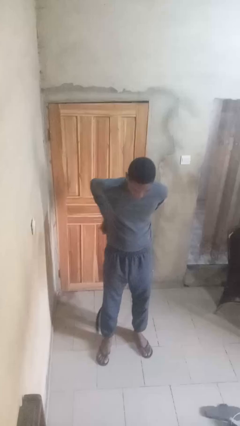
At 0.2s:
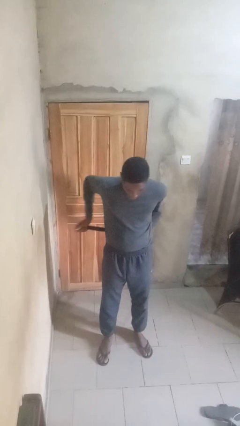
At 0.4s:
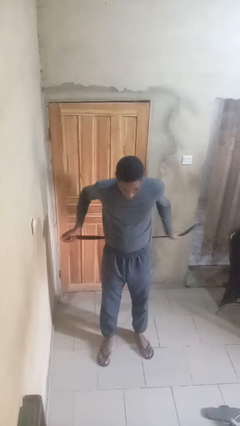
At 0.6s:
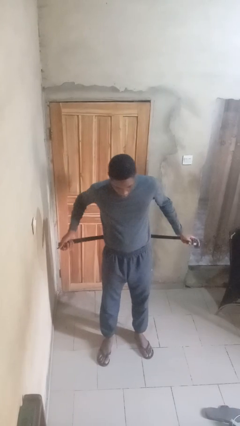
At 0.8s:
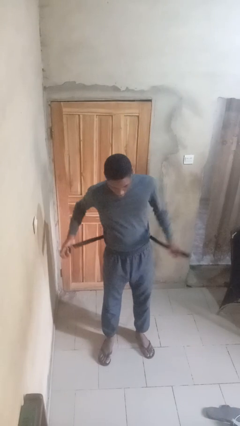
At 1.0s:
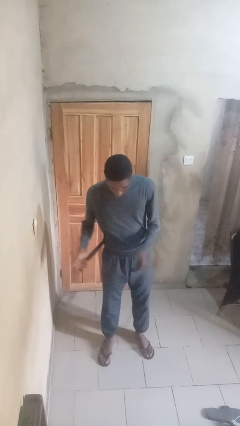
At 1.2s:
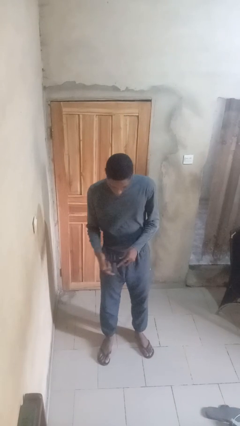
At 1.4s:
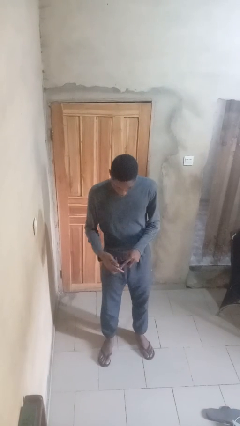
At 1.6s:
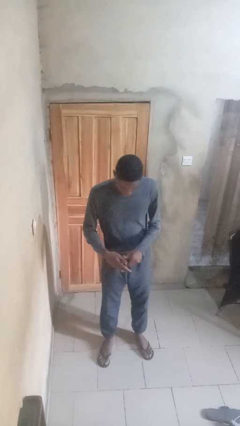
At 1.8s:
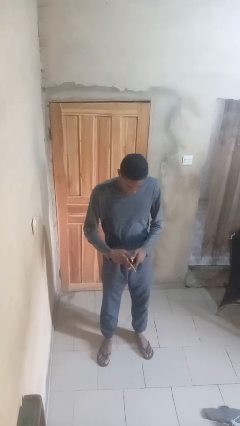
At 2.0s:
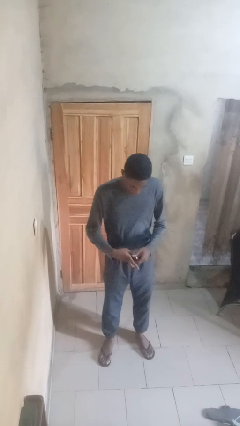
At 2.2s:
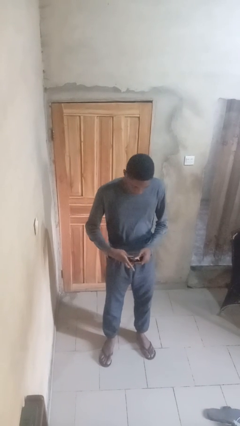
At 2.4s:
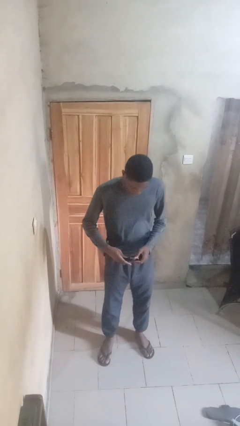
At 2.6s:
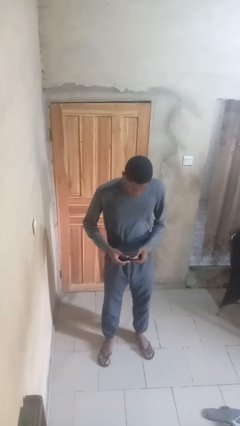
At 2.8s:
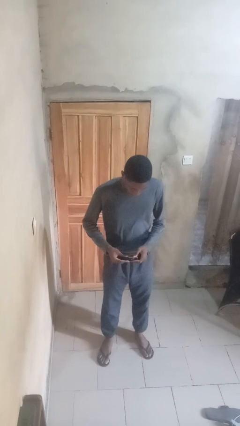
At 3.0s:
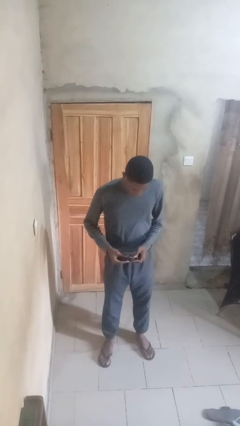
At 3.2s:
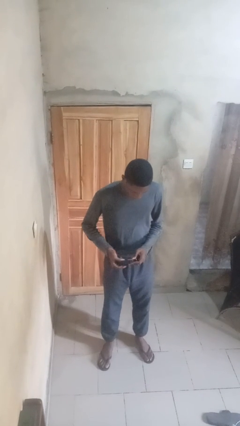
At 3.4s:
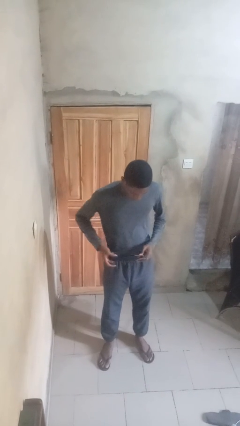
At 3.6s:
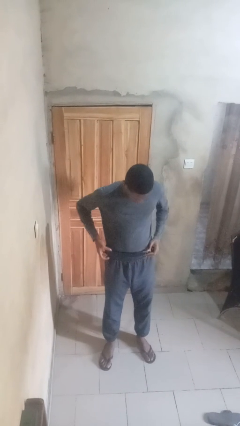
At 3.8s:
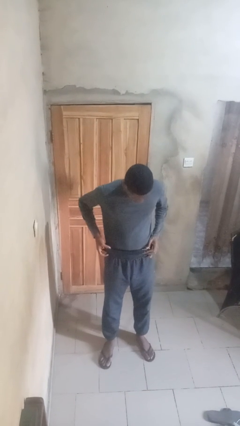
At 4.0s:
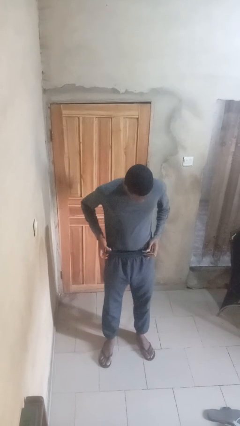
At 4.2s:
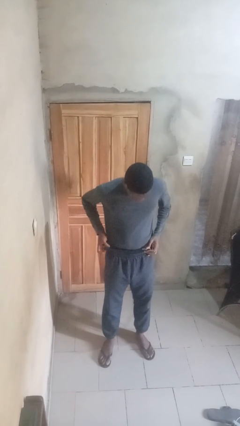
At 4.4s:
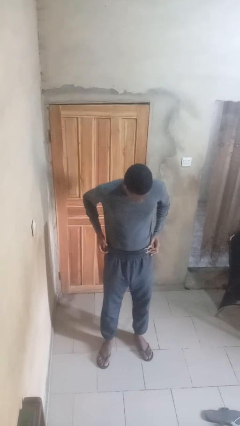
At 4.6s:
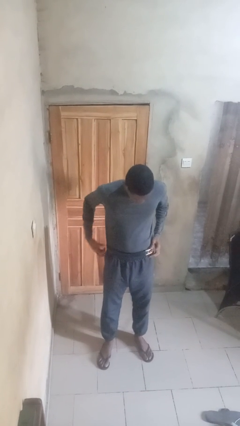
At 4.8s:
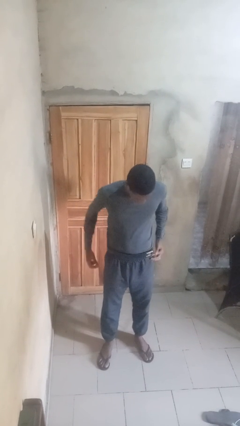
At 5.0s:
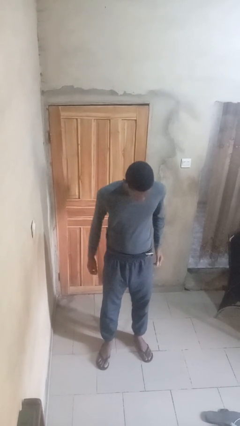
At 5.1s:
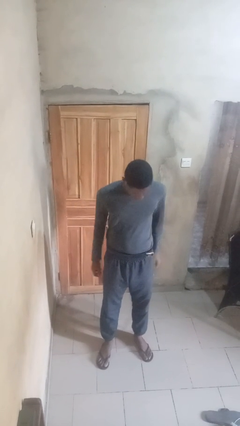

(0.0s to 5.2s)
person puts on belt

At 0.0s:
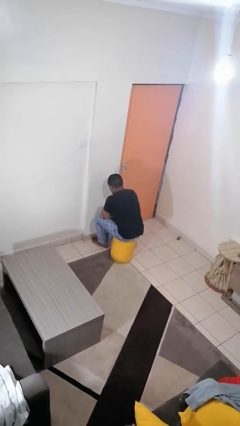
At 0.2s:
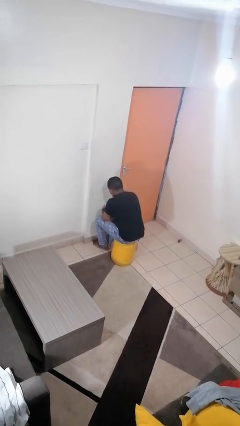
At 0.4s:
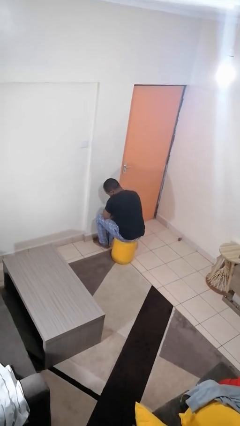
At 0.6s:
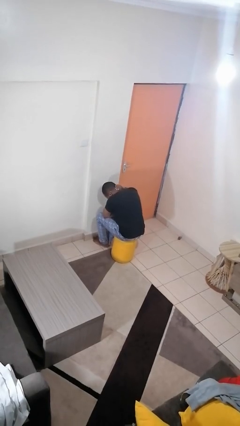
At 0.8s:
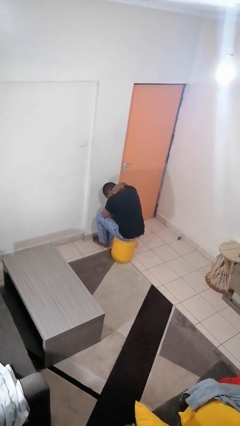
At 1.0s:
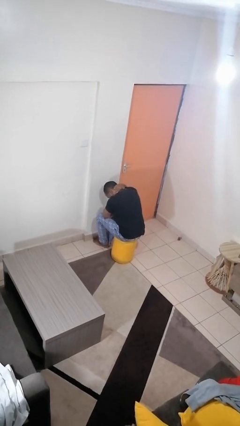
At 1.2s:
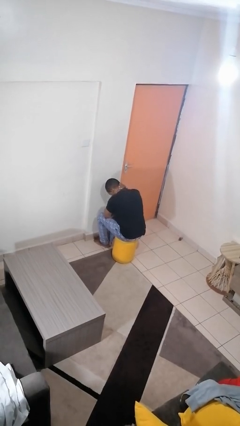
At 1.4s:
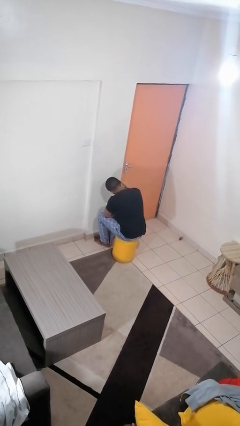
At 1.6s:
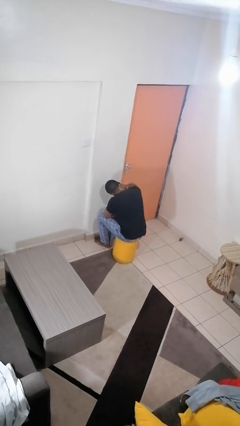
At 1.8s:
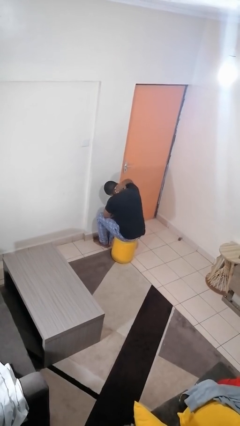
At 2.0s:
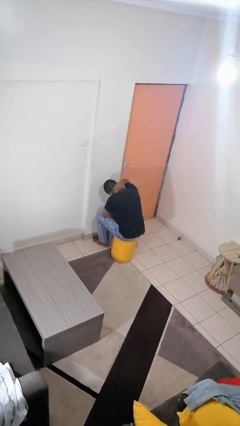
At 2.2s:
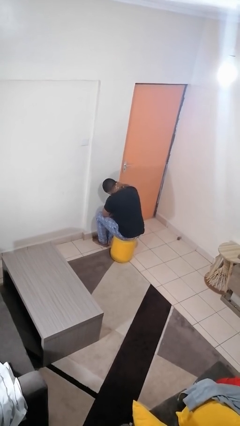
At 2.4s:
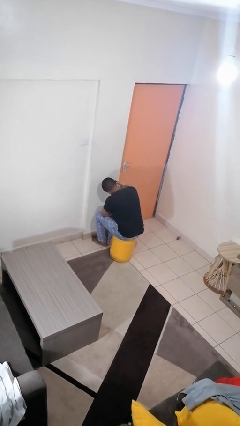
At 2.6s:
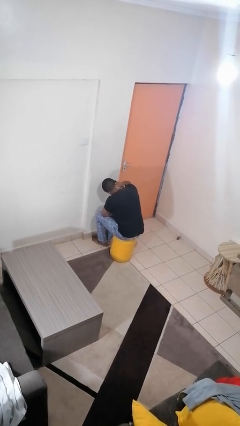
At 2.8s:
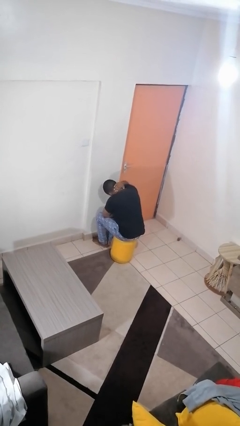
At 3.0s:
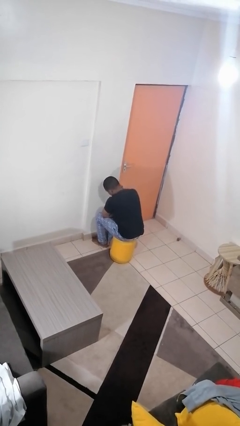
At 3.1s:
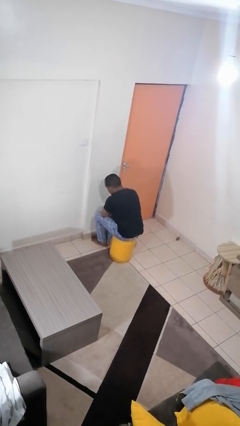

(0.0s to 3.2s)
person rubs neck

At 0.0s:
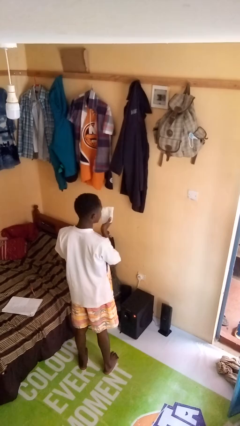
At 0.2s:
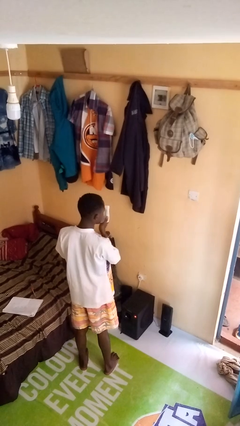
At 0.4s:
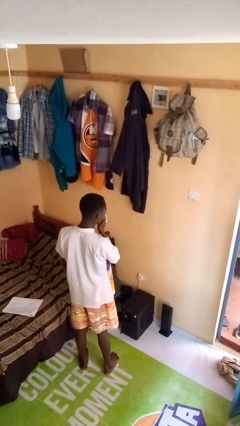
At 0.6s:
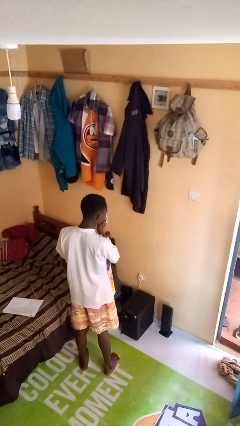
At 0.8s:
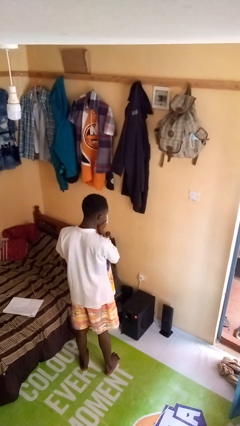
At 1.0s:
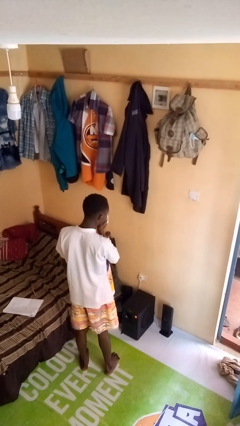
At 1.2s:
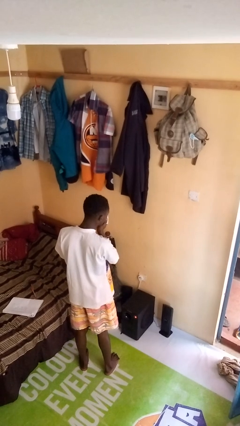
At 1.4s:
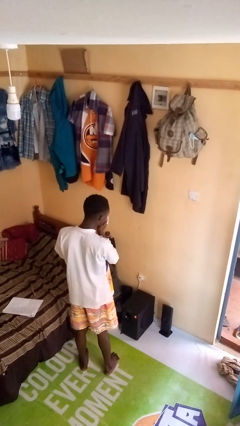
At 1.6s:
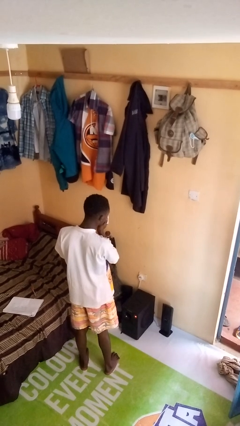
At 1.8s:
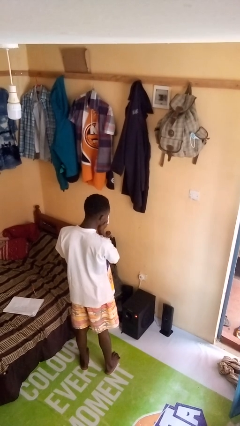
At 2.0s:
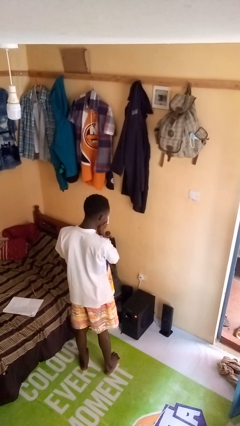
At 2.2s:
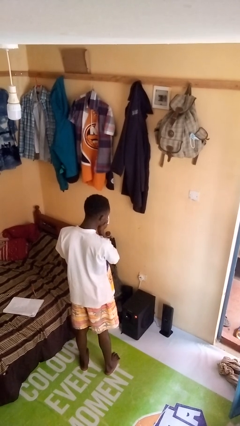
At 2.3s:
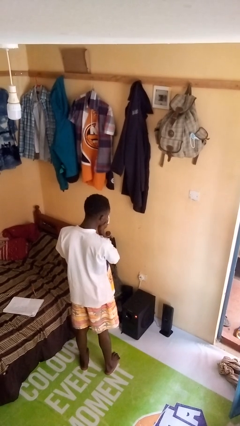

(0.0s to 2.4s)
person blows nose

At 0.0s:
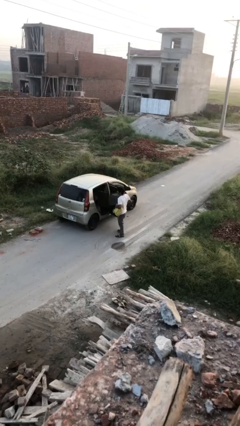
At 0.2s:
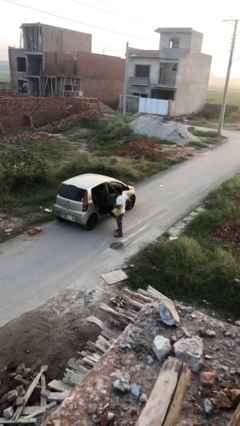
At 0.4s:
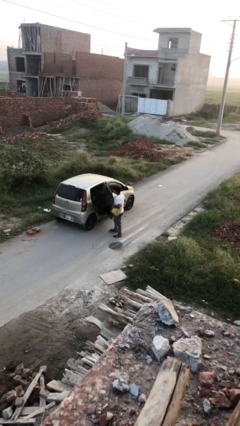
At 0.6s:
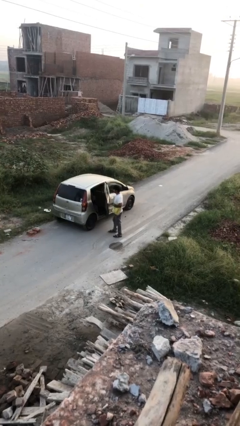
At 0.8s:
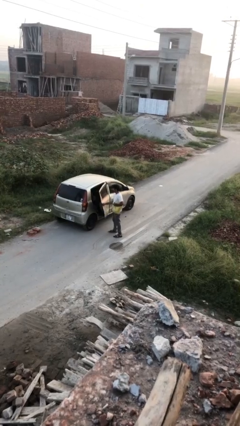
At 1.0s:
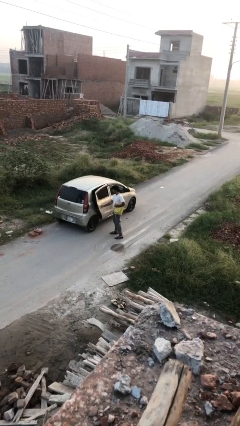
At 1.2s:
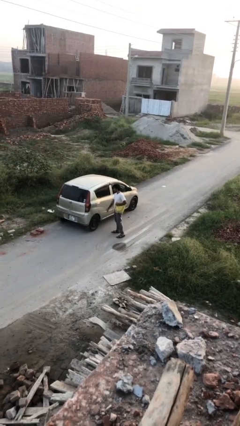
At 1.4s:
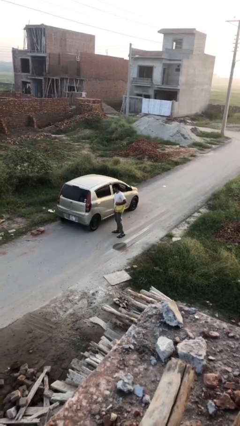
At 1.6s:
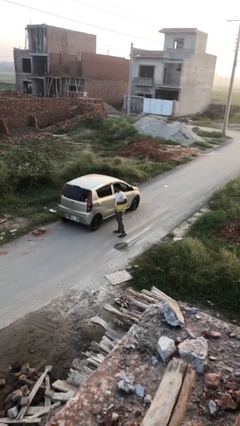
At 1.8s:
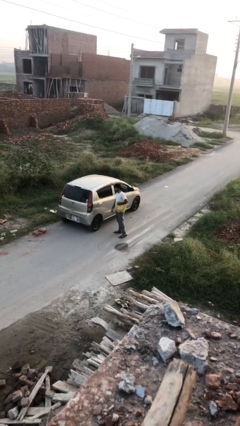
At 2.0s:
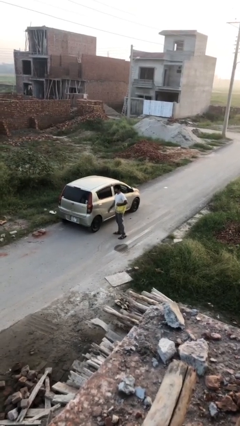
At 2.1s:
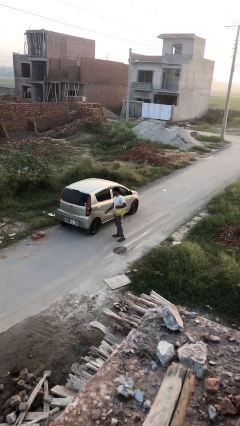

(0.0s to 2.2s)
person closes car door

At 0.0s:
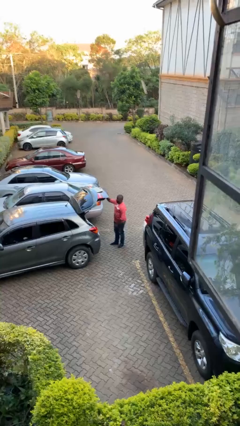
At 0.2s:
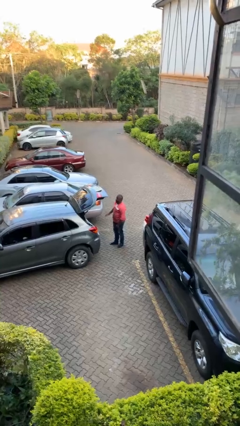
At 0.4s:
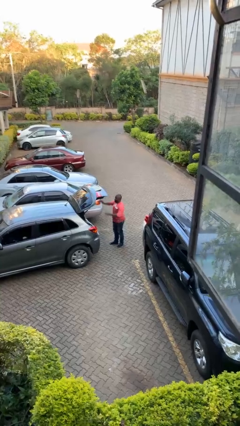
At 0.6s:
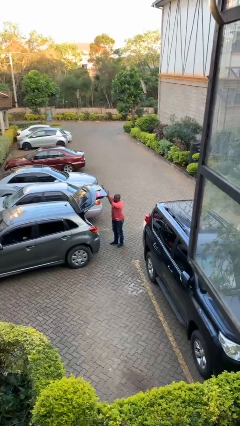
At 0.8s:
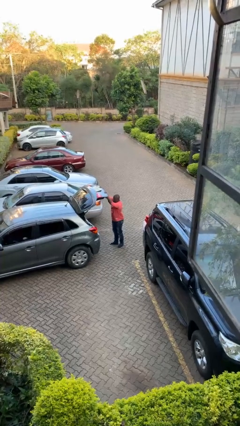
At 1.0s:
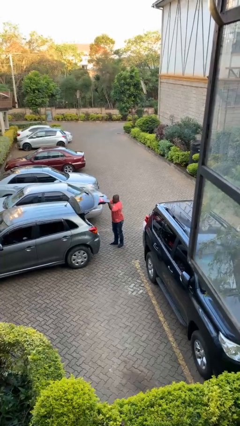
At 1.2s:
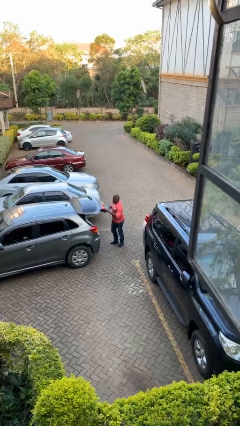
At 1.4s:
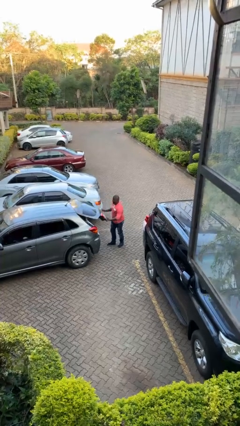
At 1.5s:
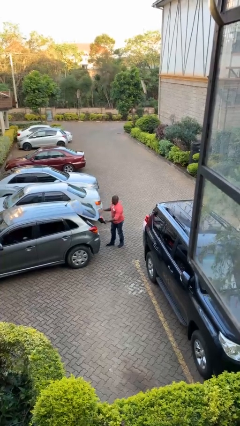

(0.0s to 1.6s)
person closes car trunk

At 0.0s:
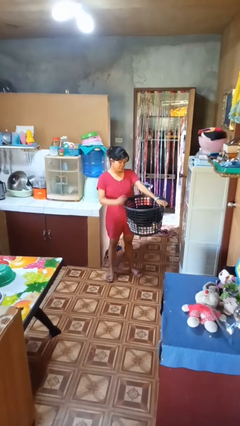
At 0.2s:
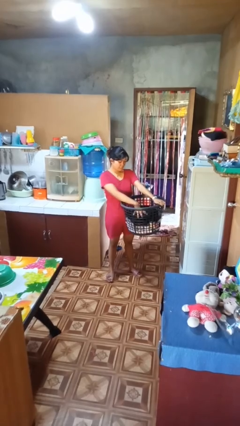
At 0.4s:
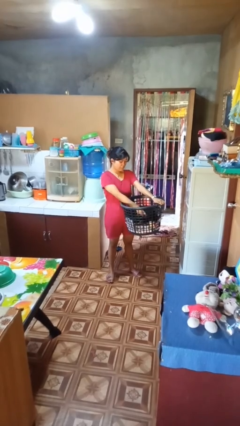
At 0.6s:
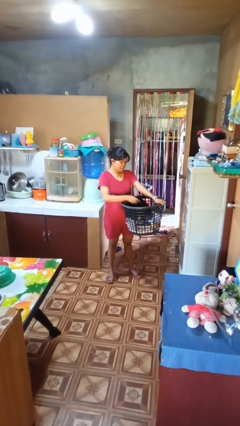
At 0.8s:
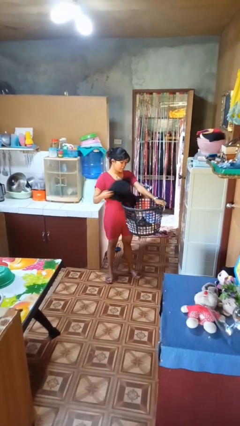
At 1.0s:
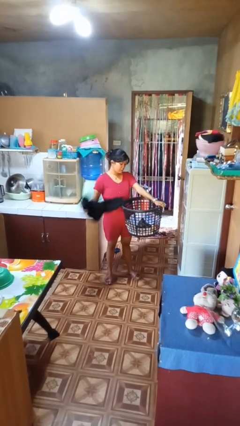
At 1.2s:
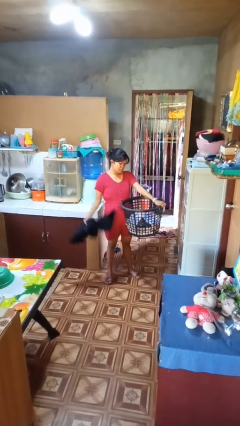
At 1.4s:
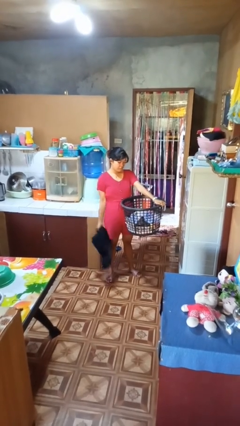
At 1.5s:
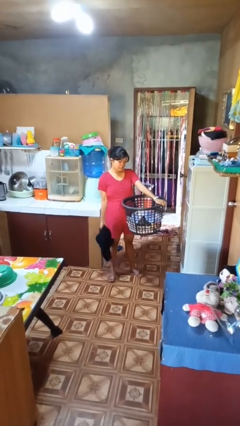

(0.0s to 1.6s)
person takes object from basket

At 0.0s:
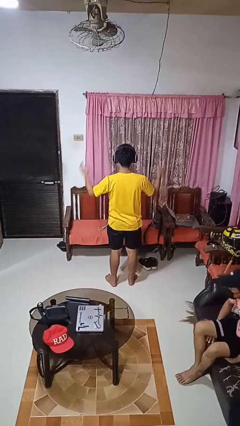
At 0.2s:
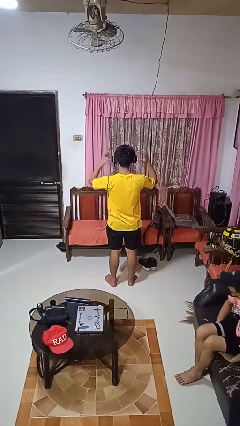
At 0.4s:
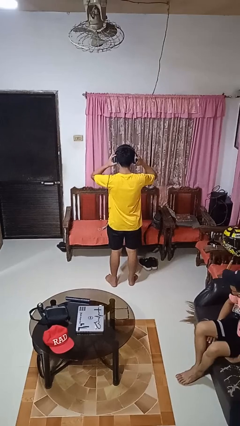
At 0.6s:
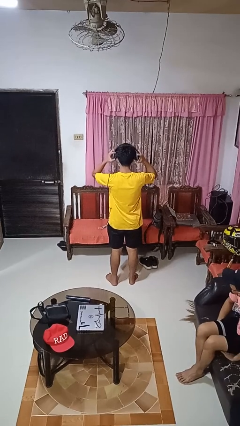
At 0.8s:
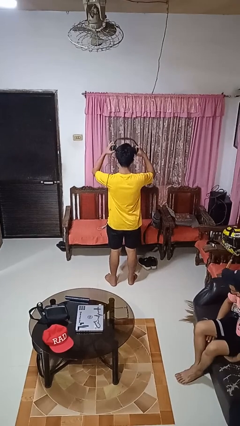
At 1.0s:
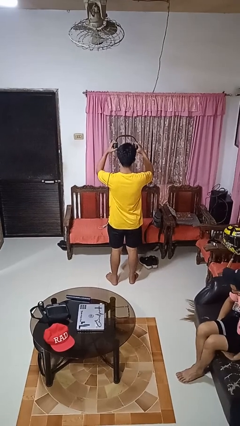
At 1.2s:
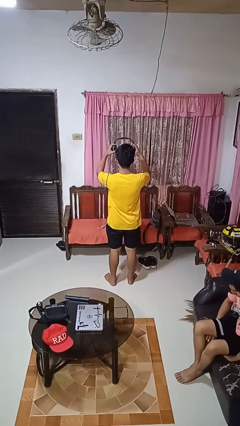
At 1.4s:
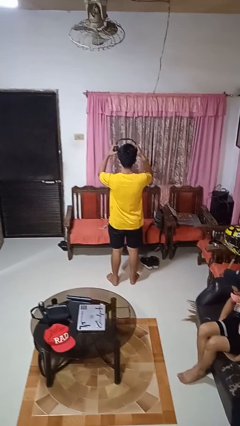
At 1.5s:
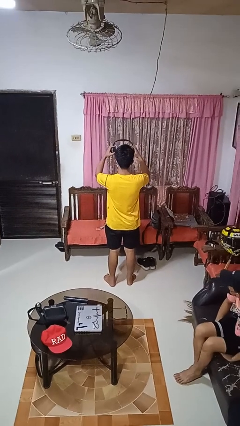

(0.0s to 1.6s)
person takes off headphones
